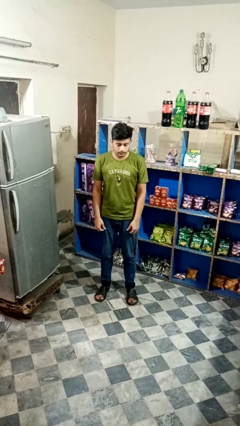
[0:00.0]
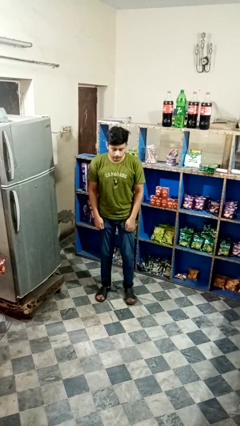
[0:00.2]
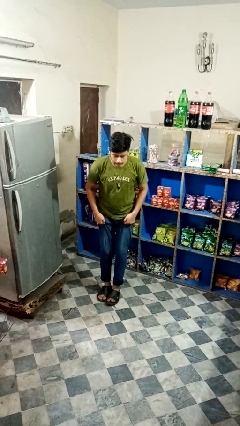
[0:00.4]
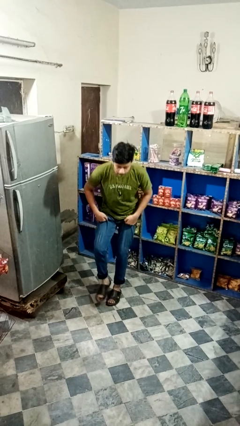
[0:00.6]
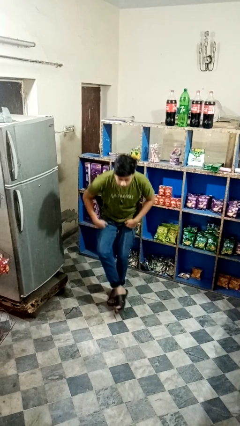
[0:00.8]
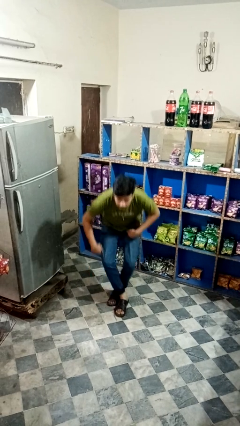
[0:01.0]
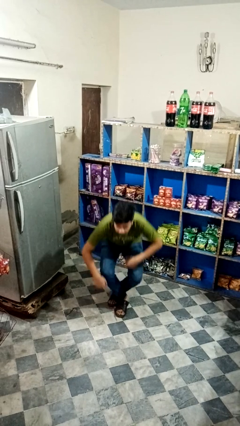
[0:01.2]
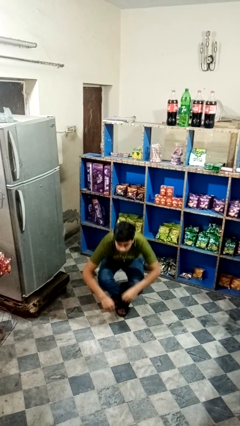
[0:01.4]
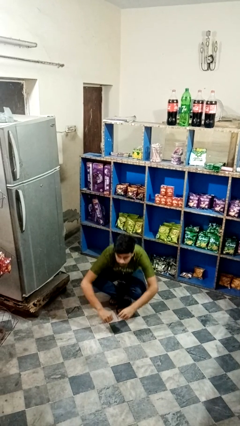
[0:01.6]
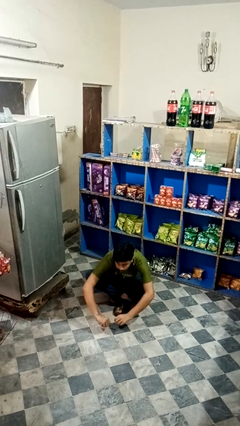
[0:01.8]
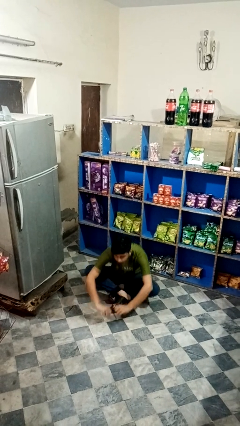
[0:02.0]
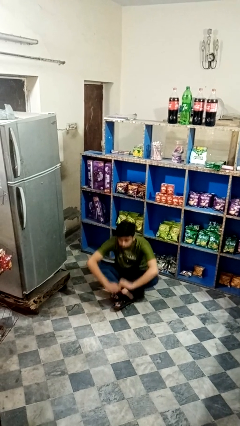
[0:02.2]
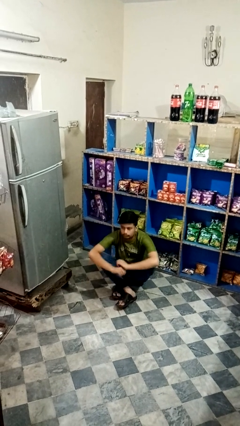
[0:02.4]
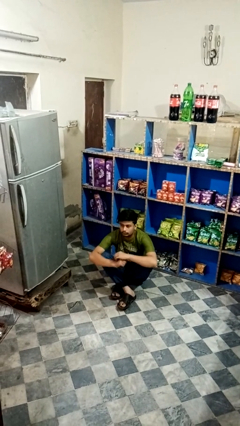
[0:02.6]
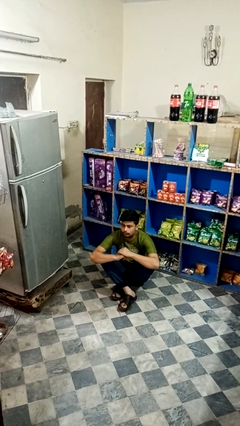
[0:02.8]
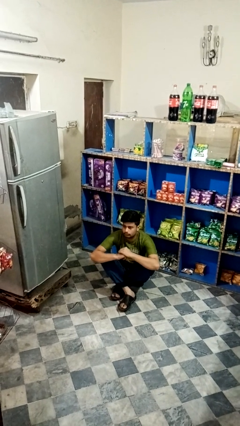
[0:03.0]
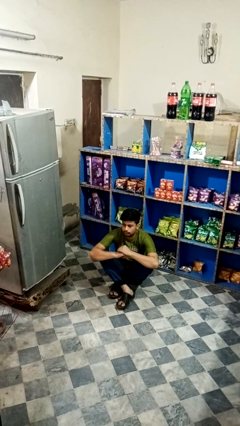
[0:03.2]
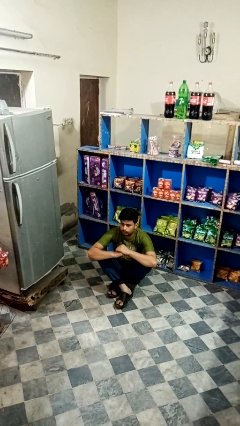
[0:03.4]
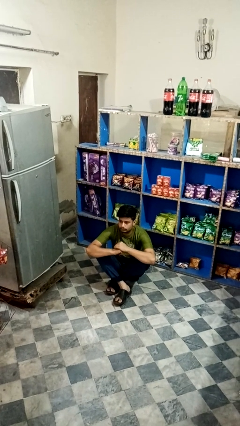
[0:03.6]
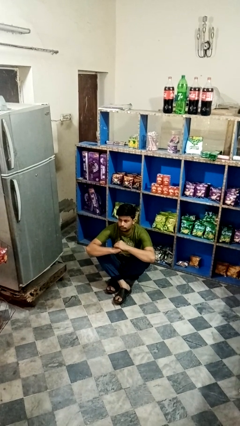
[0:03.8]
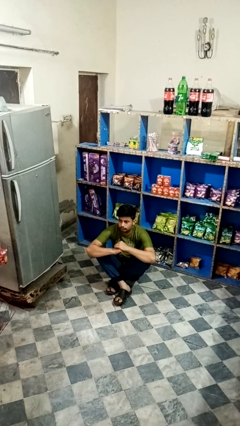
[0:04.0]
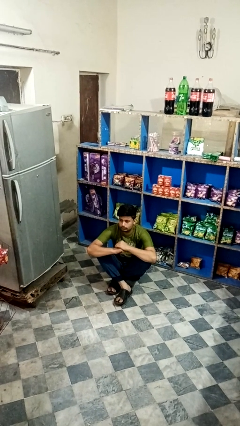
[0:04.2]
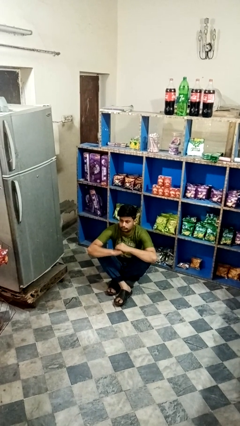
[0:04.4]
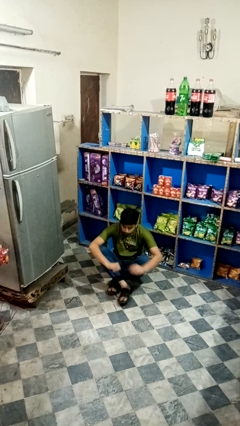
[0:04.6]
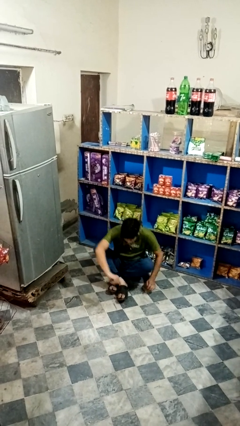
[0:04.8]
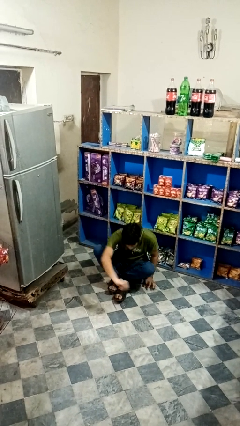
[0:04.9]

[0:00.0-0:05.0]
person sits crisscross

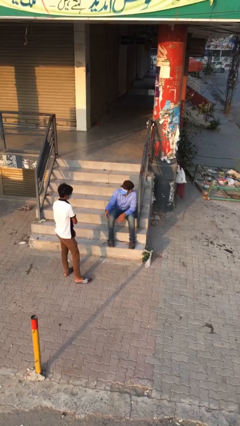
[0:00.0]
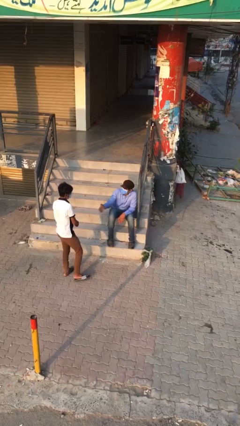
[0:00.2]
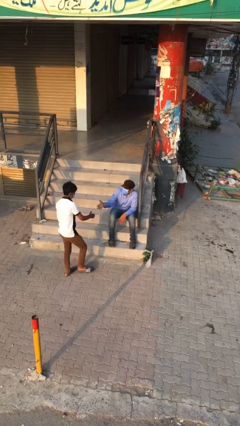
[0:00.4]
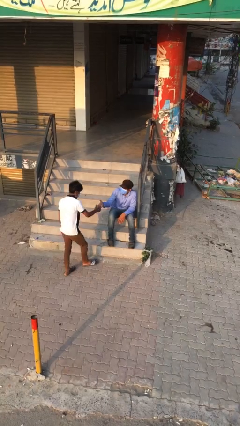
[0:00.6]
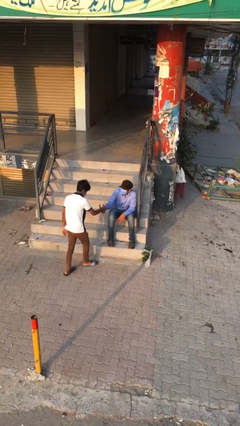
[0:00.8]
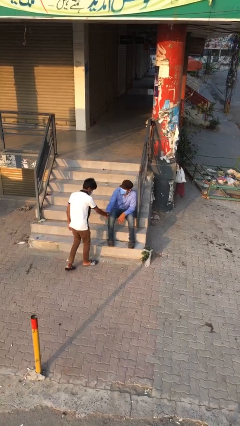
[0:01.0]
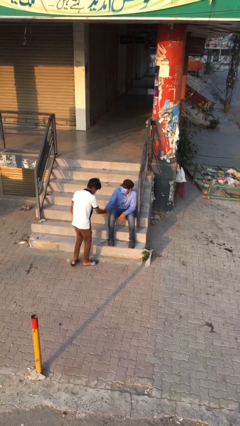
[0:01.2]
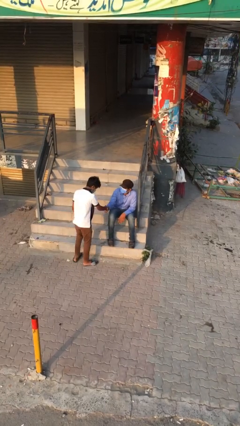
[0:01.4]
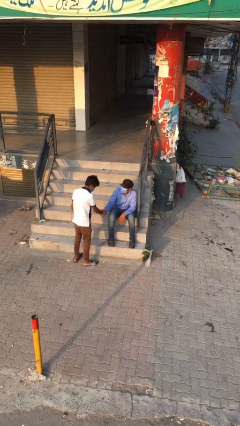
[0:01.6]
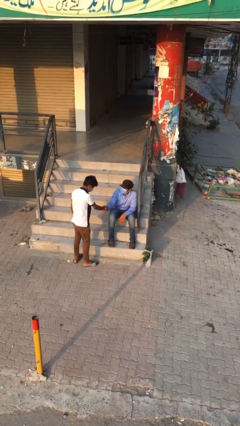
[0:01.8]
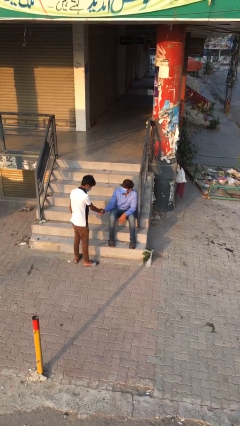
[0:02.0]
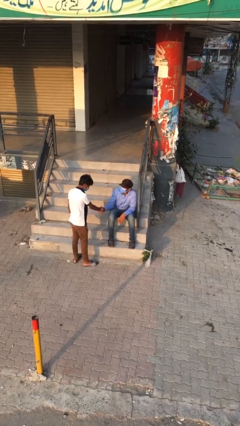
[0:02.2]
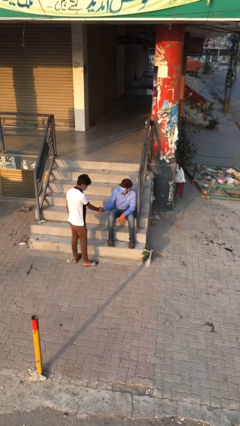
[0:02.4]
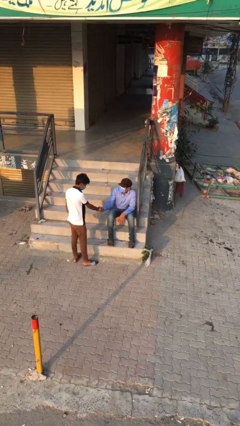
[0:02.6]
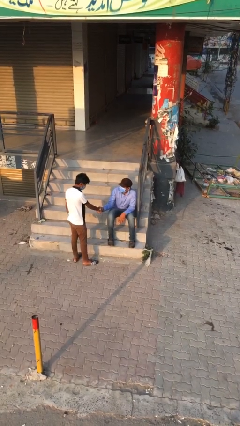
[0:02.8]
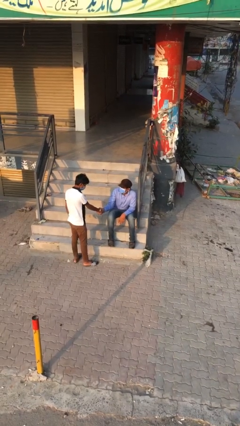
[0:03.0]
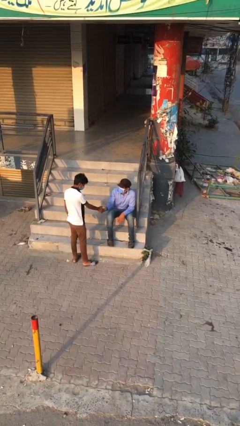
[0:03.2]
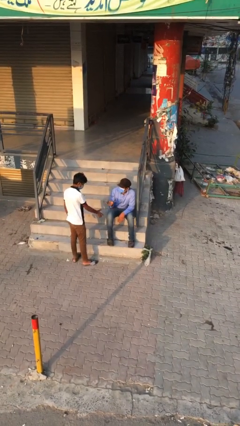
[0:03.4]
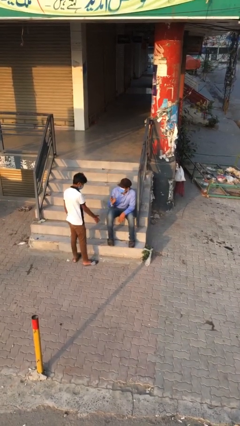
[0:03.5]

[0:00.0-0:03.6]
person shakes hand

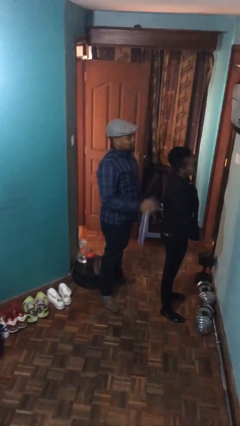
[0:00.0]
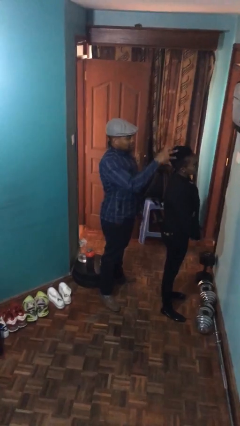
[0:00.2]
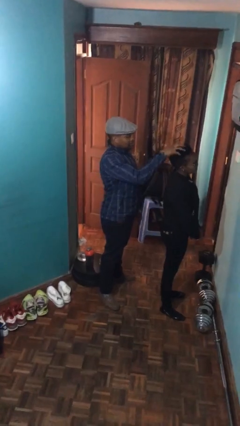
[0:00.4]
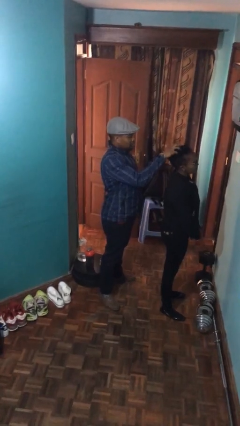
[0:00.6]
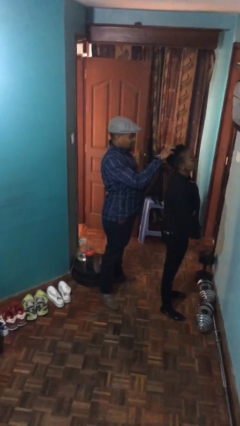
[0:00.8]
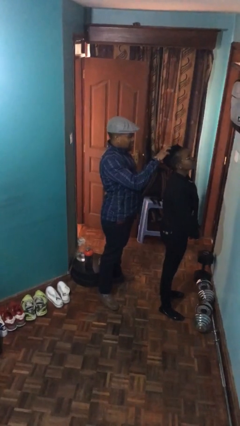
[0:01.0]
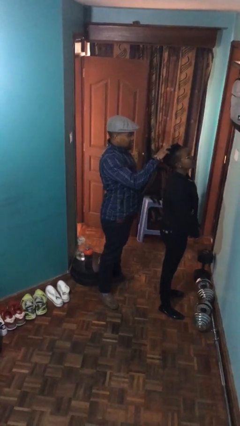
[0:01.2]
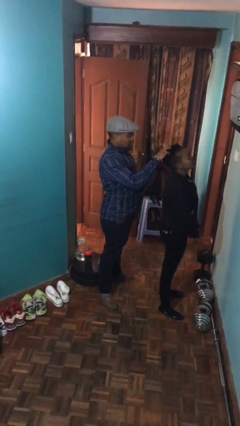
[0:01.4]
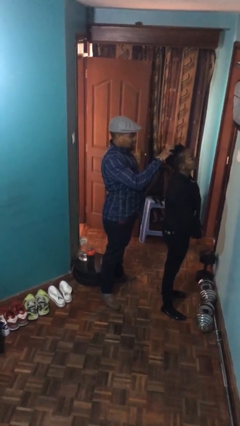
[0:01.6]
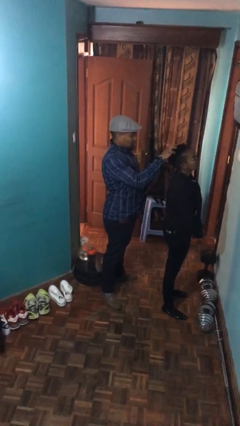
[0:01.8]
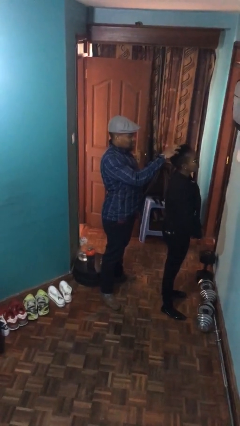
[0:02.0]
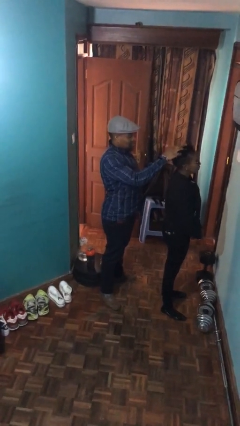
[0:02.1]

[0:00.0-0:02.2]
person grabs person by hair

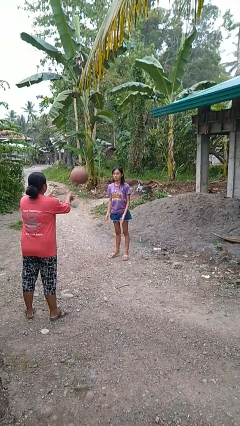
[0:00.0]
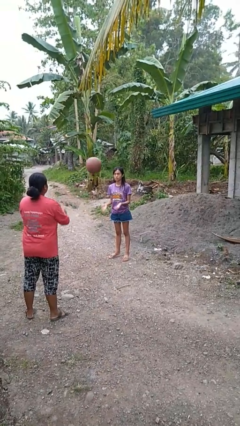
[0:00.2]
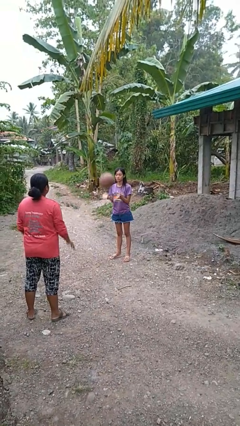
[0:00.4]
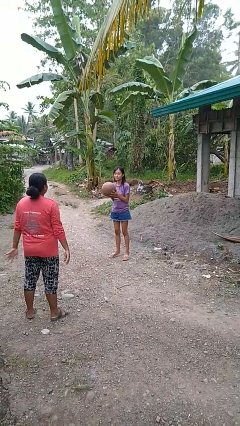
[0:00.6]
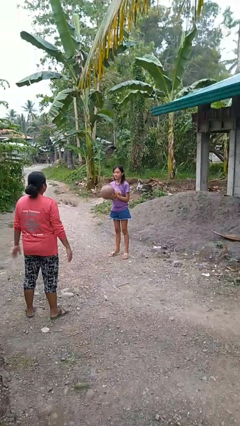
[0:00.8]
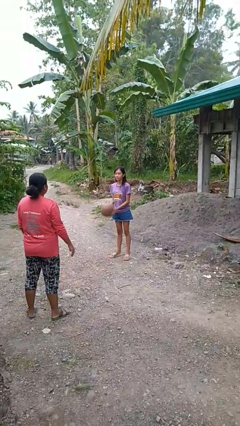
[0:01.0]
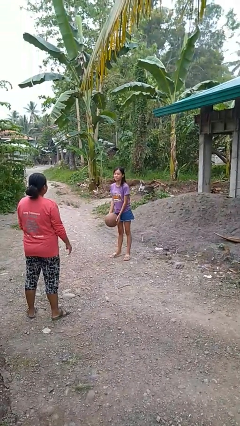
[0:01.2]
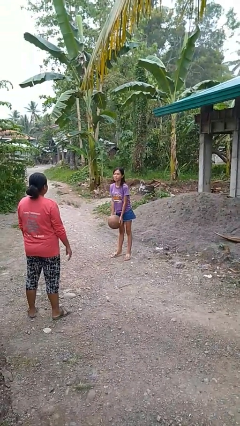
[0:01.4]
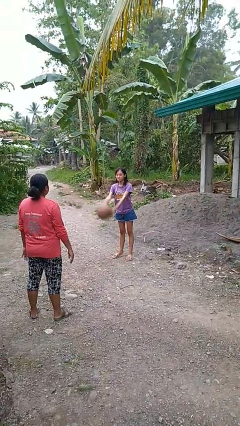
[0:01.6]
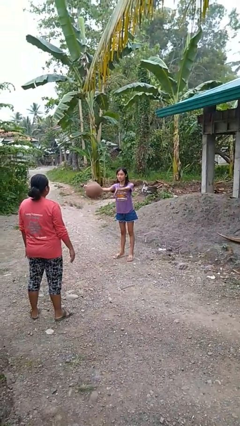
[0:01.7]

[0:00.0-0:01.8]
person catches object from person

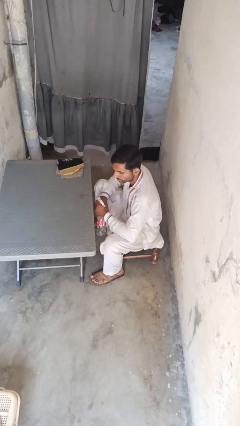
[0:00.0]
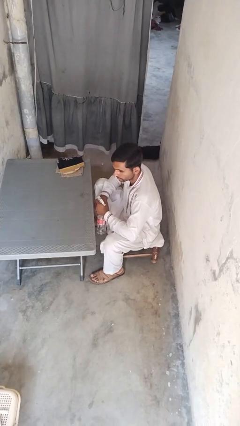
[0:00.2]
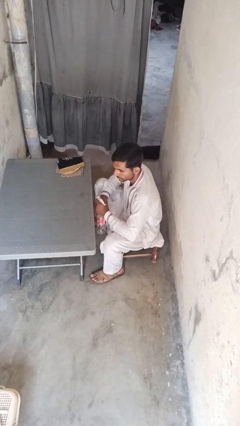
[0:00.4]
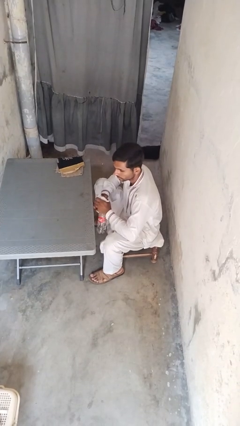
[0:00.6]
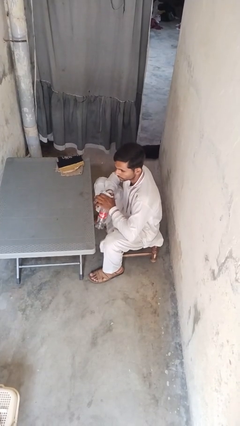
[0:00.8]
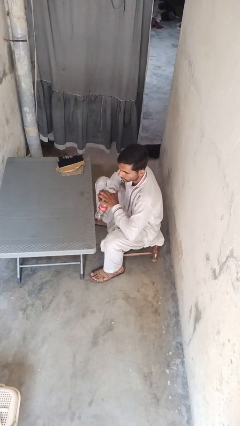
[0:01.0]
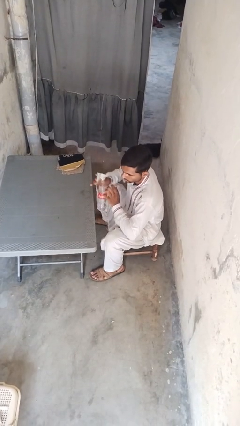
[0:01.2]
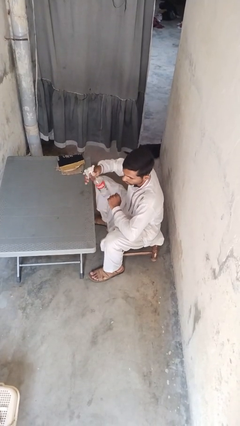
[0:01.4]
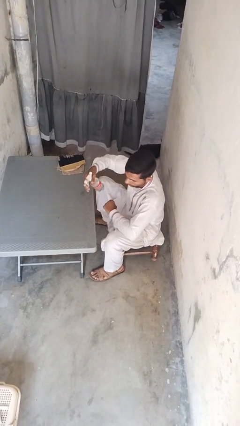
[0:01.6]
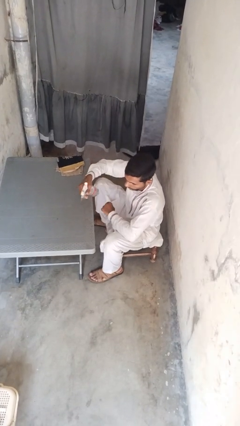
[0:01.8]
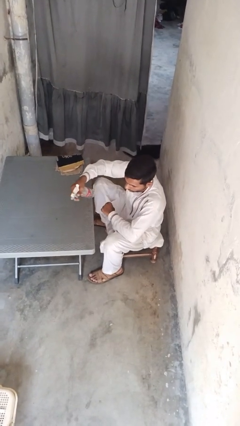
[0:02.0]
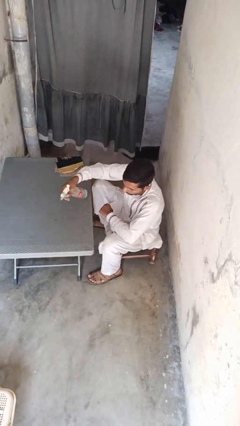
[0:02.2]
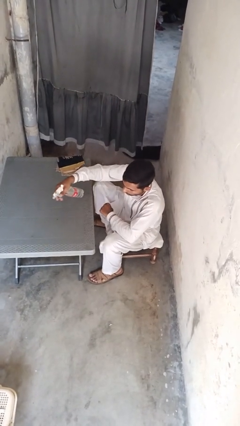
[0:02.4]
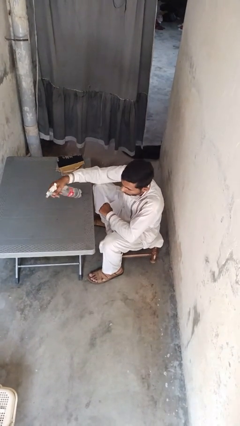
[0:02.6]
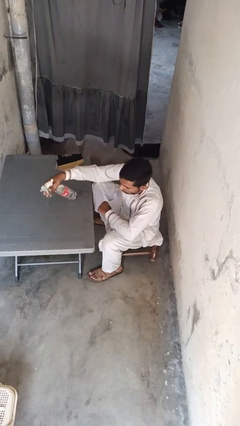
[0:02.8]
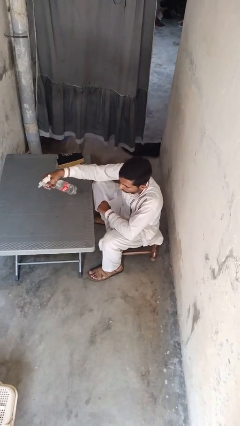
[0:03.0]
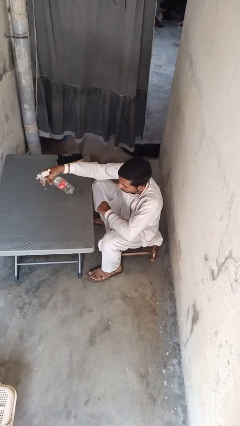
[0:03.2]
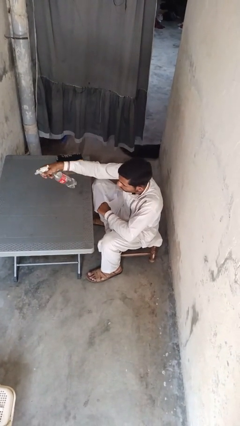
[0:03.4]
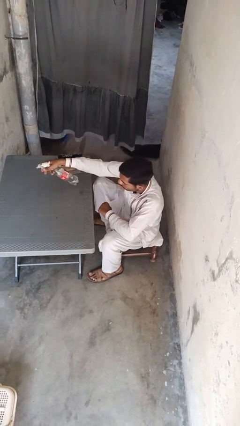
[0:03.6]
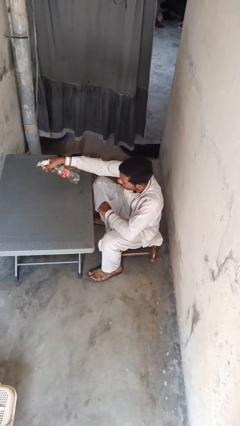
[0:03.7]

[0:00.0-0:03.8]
person sprays from bottle

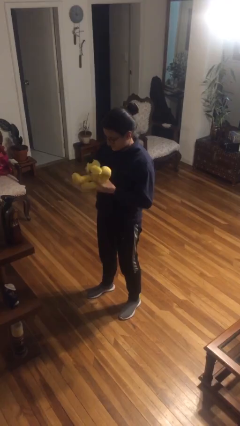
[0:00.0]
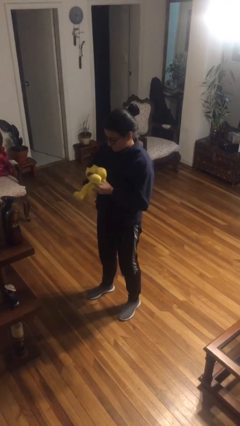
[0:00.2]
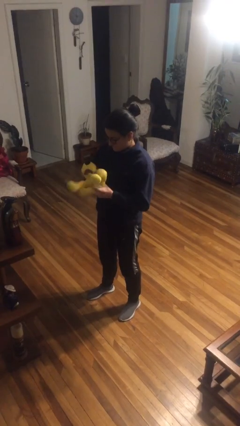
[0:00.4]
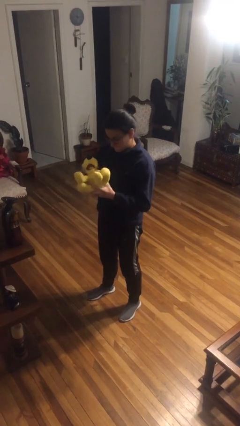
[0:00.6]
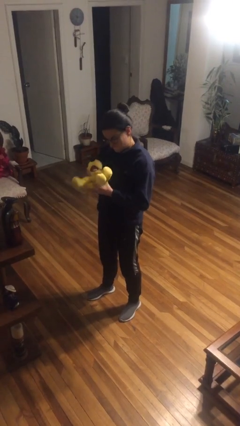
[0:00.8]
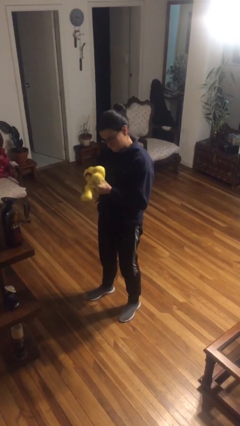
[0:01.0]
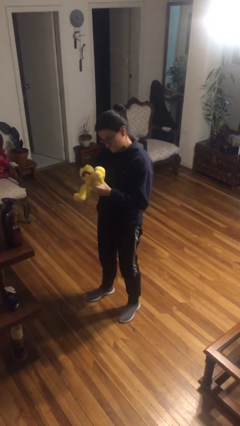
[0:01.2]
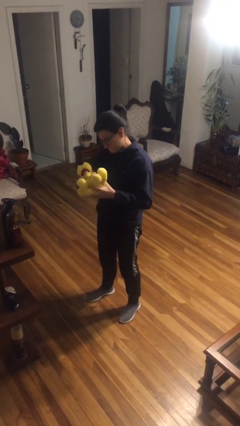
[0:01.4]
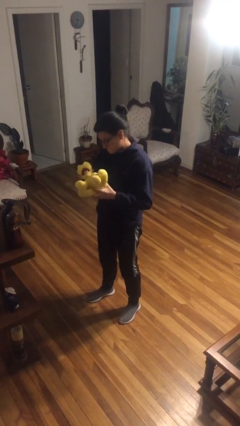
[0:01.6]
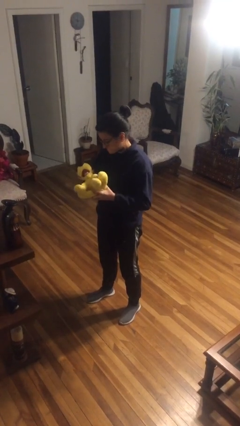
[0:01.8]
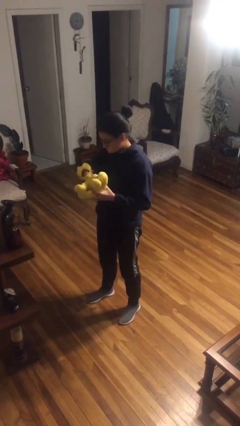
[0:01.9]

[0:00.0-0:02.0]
person squeezes object
